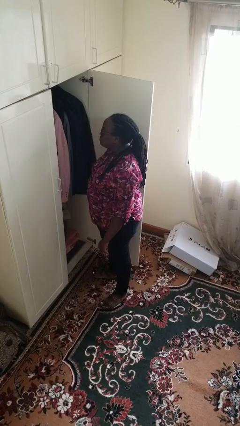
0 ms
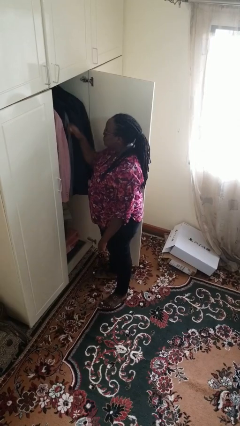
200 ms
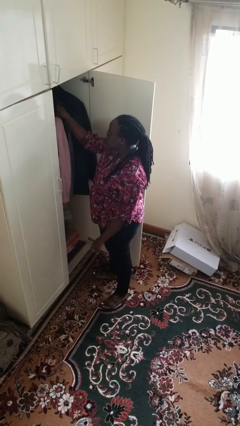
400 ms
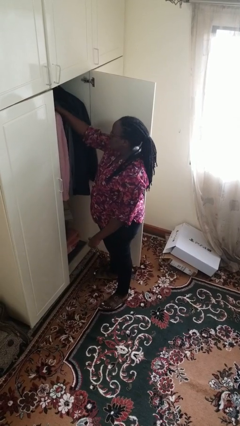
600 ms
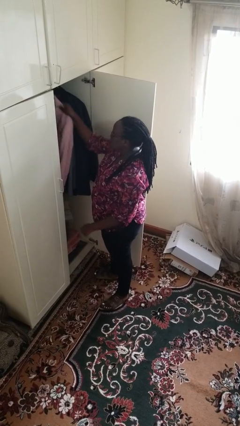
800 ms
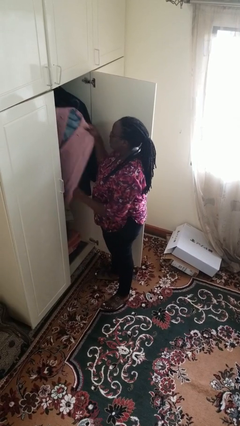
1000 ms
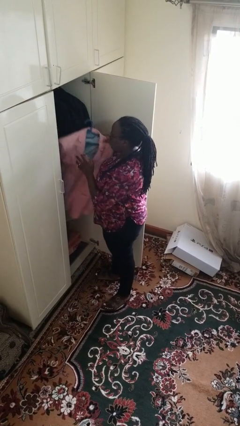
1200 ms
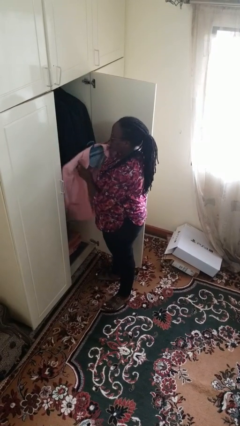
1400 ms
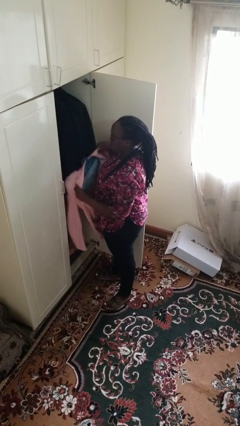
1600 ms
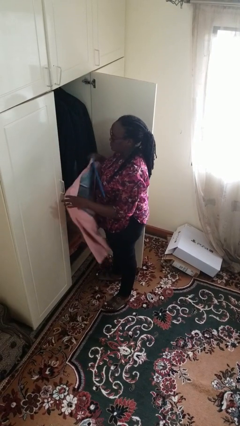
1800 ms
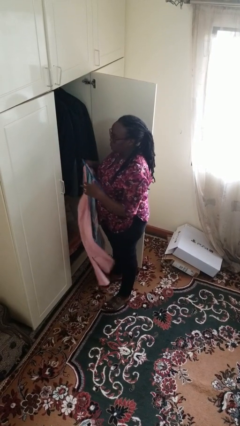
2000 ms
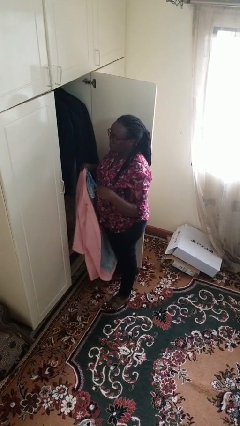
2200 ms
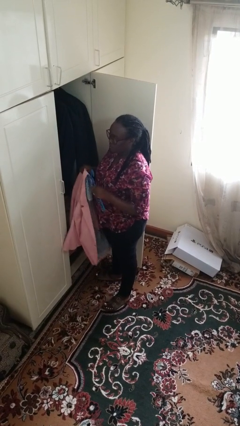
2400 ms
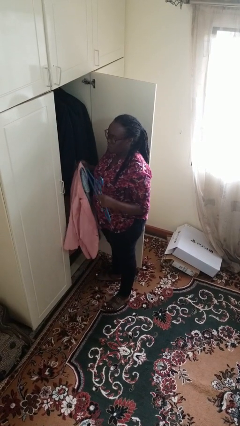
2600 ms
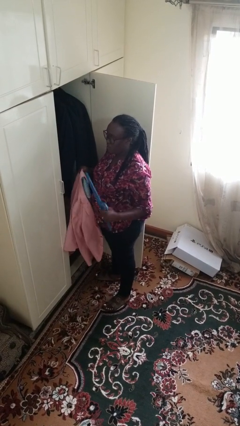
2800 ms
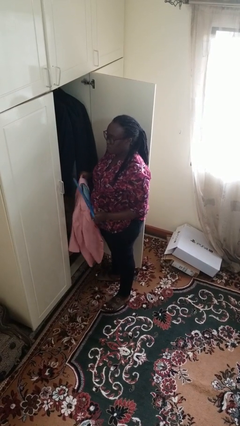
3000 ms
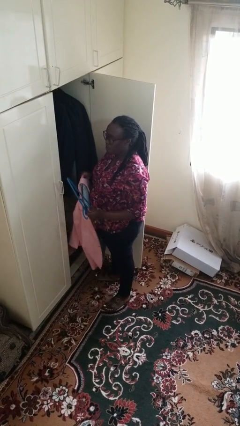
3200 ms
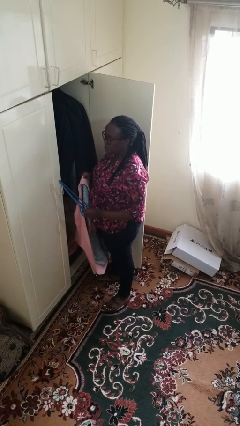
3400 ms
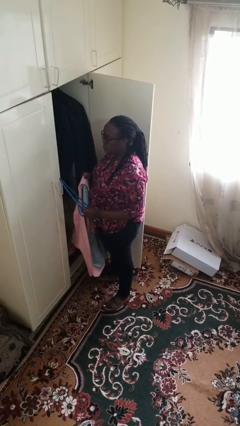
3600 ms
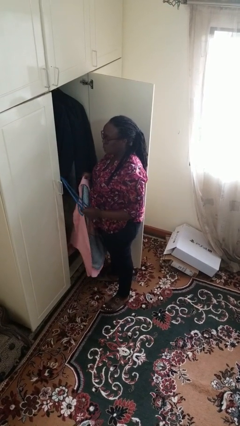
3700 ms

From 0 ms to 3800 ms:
person takes clothes from closet

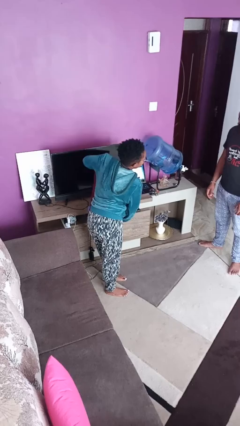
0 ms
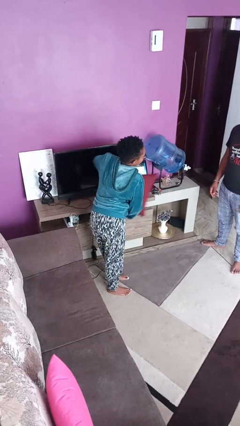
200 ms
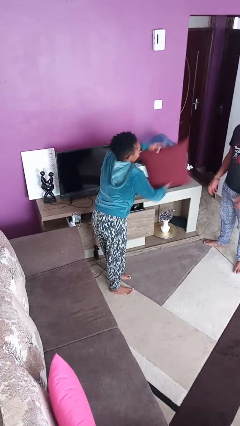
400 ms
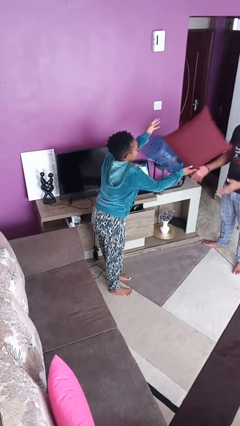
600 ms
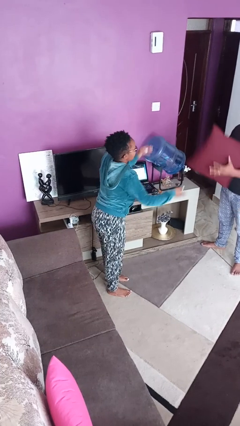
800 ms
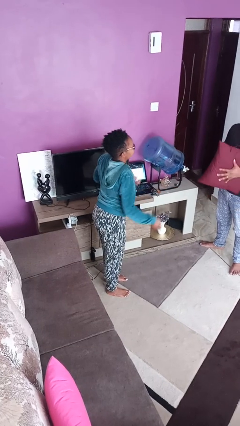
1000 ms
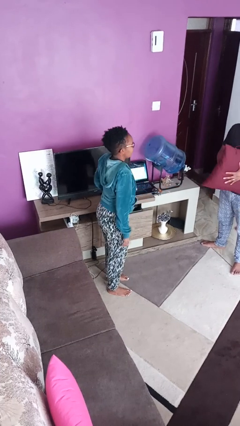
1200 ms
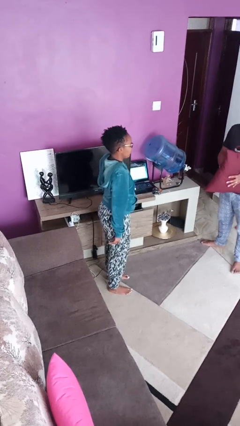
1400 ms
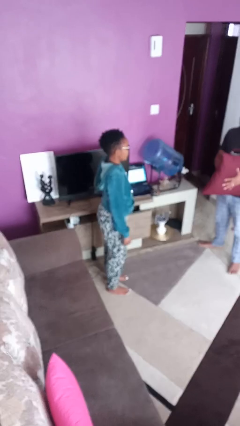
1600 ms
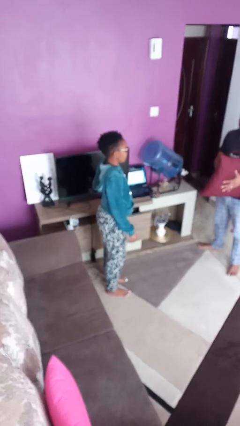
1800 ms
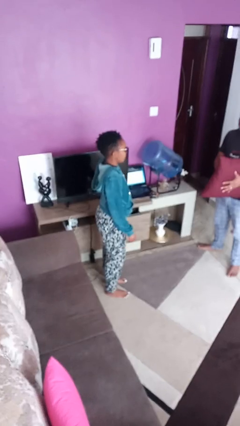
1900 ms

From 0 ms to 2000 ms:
person throws object to person

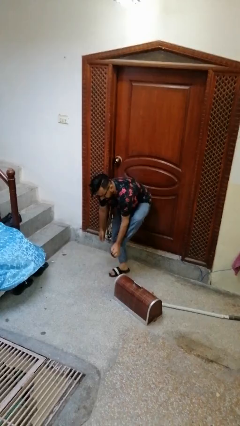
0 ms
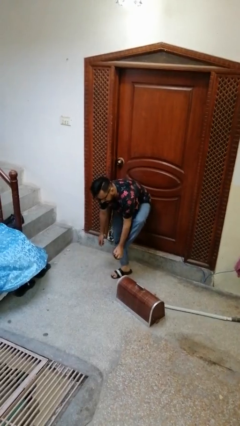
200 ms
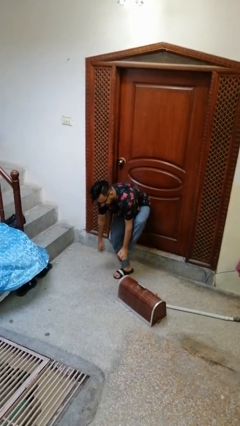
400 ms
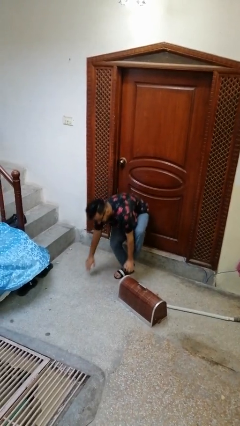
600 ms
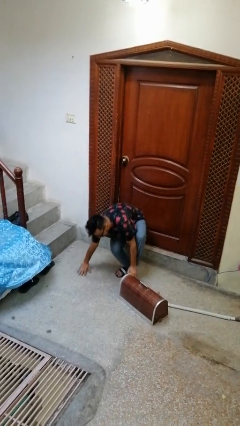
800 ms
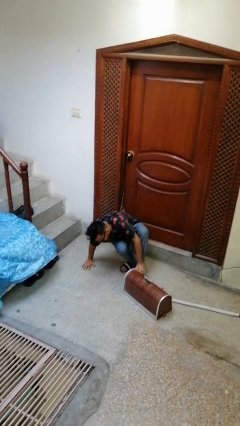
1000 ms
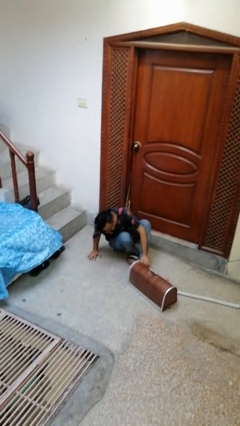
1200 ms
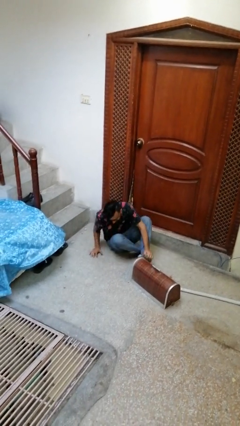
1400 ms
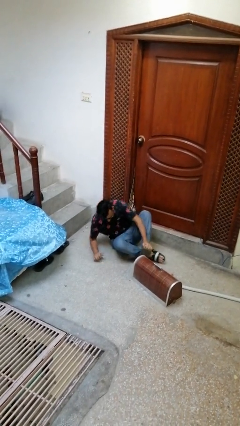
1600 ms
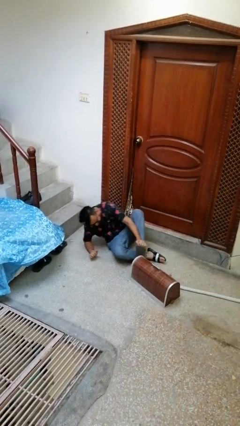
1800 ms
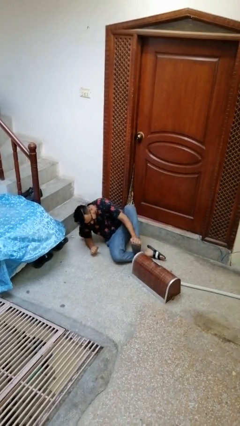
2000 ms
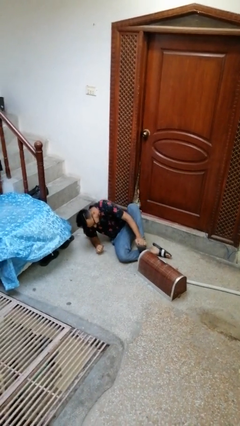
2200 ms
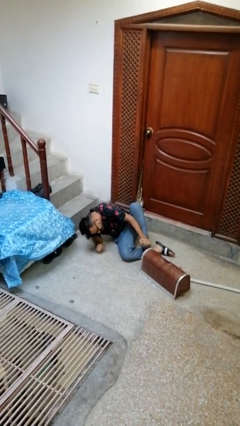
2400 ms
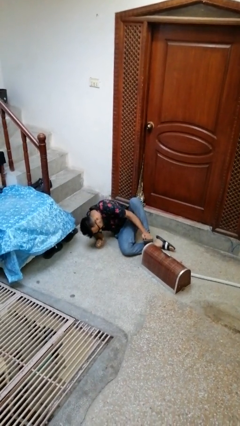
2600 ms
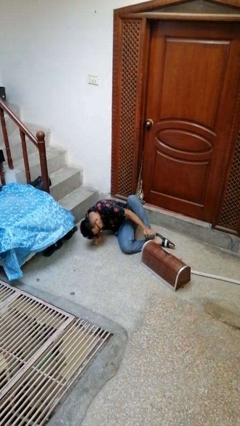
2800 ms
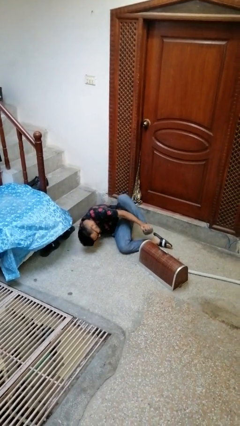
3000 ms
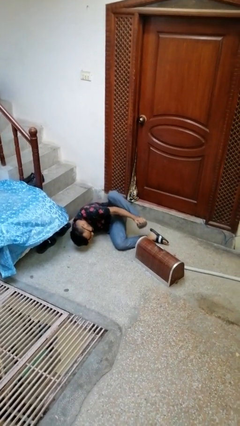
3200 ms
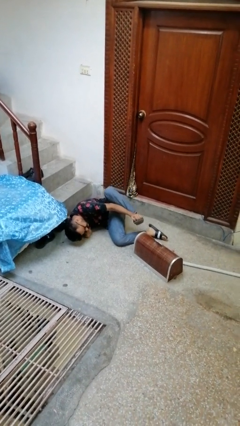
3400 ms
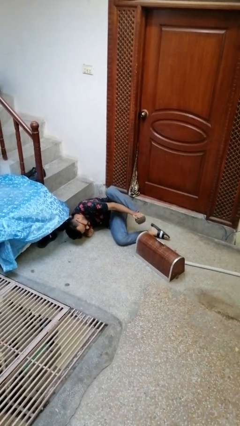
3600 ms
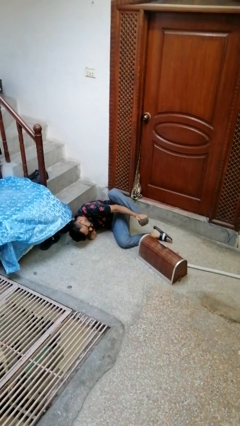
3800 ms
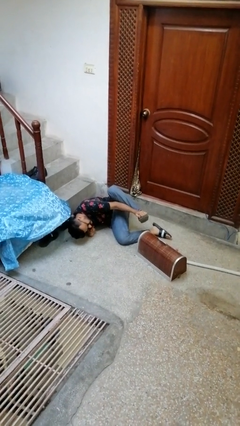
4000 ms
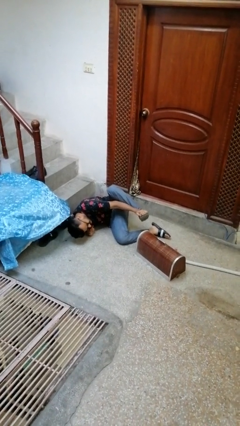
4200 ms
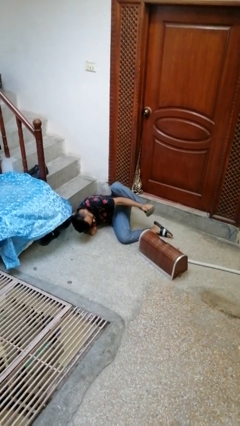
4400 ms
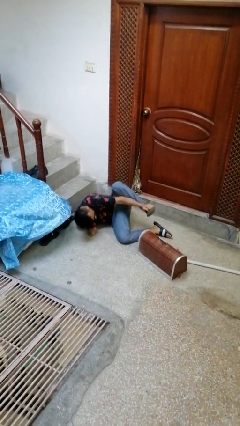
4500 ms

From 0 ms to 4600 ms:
person lies down on floor

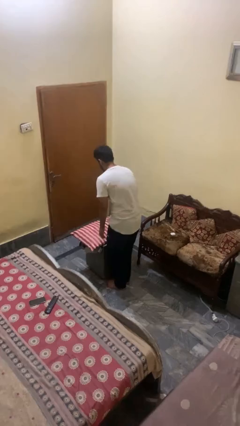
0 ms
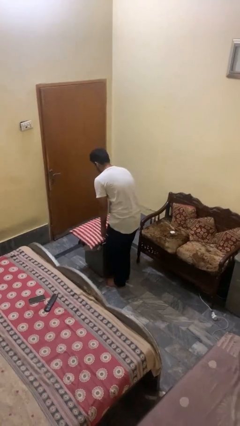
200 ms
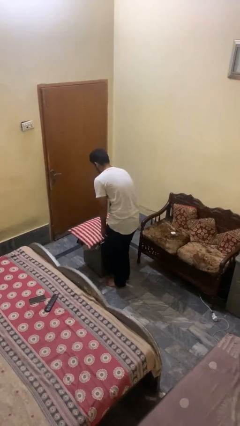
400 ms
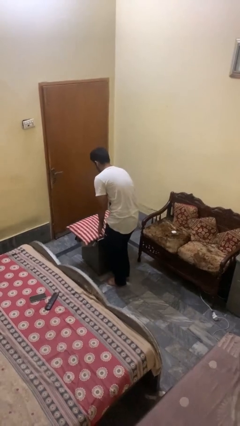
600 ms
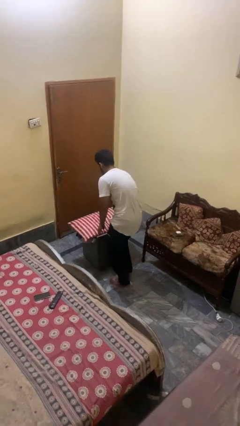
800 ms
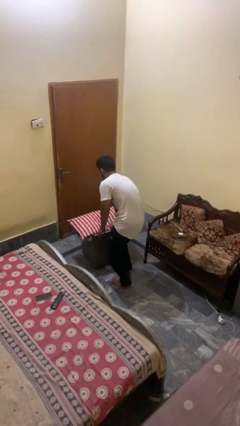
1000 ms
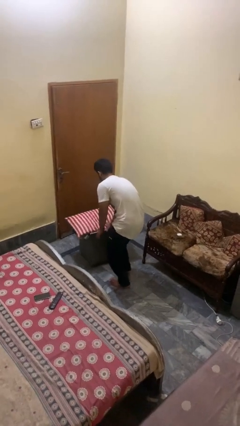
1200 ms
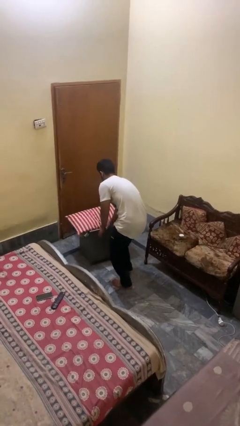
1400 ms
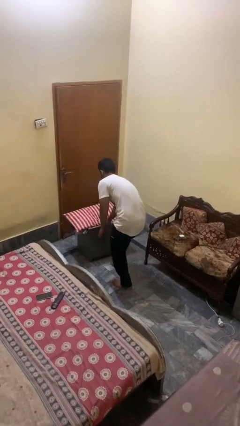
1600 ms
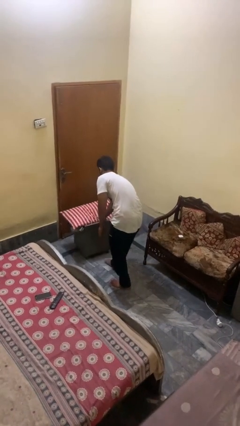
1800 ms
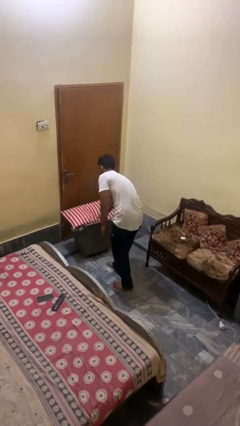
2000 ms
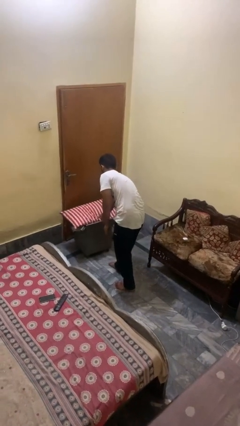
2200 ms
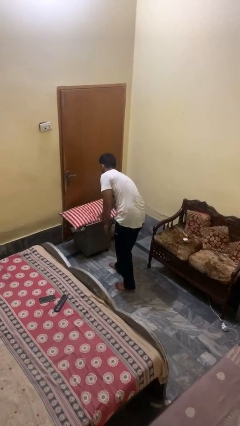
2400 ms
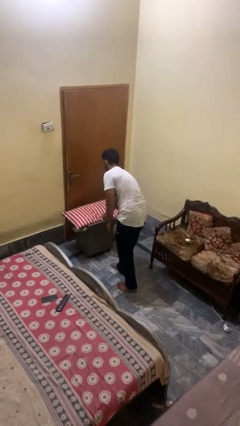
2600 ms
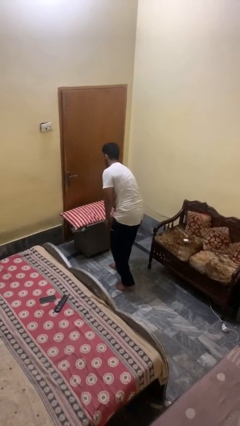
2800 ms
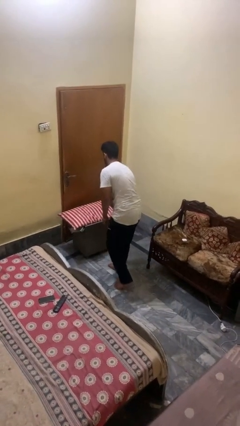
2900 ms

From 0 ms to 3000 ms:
person pushes wheeled cart

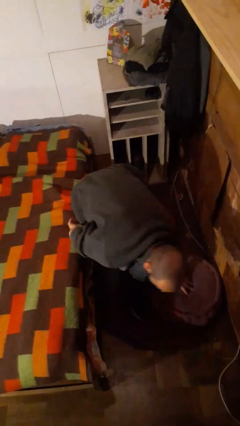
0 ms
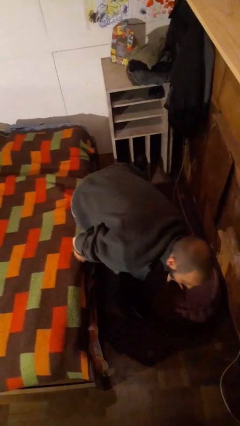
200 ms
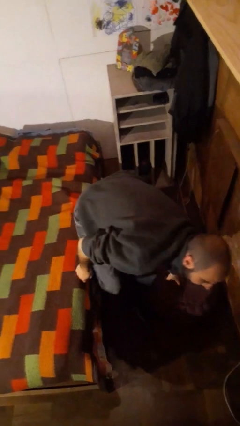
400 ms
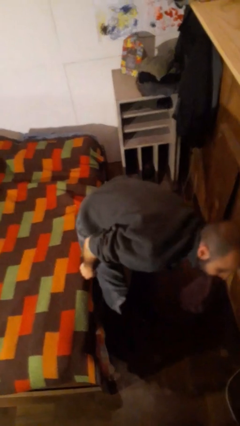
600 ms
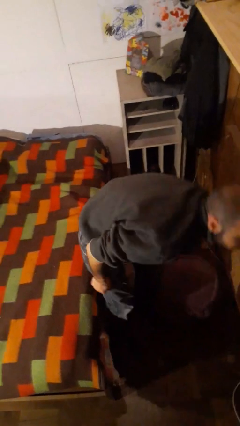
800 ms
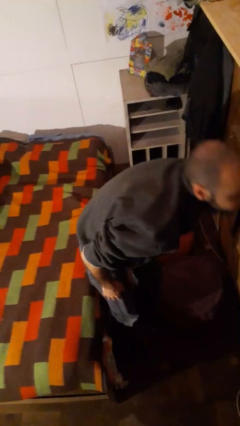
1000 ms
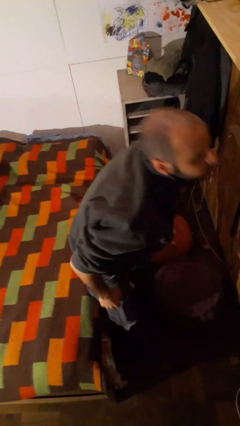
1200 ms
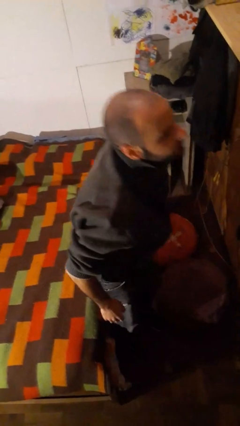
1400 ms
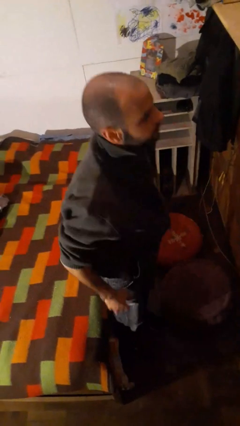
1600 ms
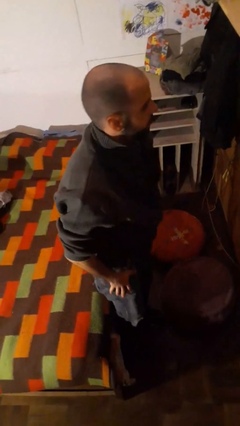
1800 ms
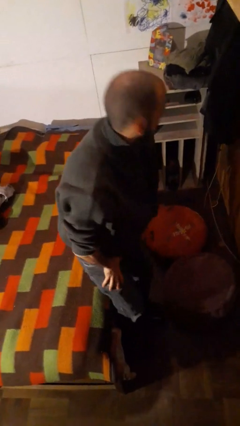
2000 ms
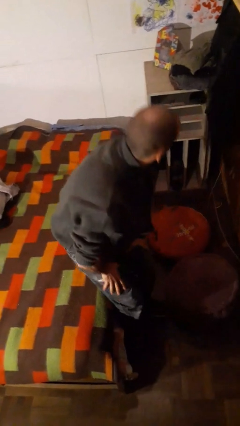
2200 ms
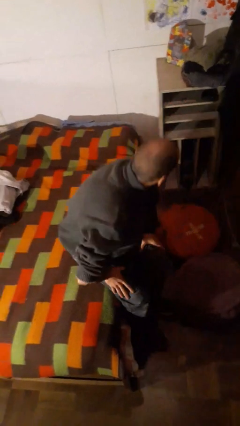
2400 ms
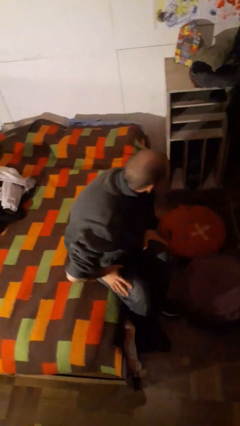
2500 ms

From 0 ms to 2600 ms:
person stands up from floor

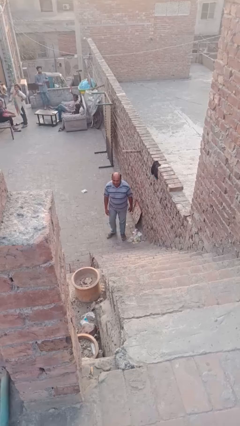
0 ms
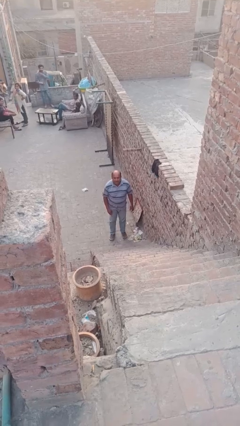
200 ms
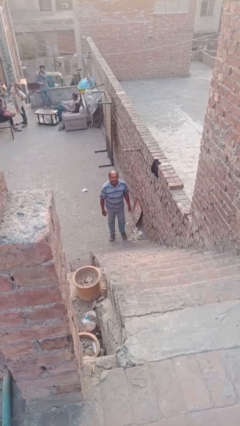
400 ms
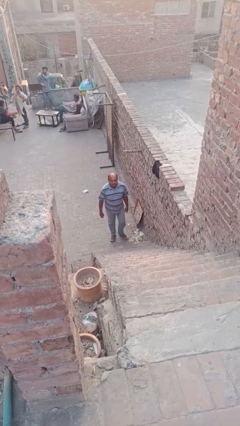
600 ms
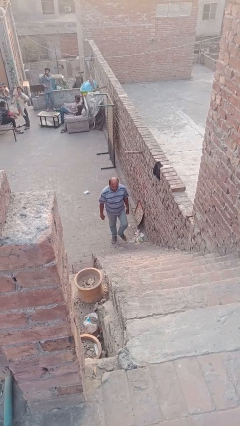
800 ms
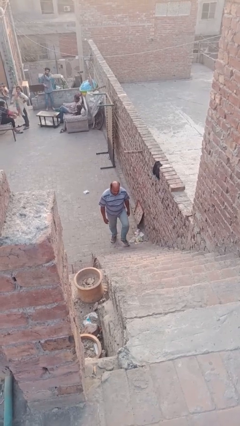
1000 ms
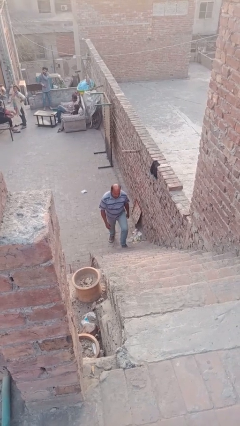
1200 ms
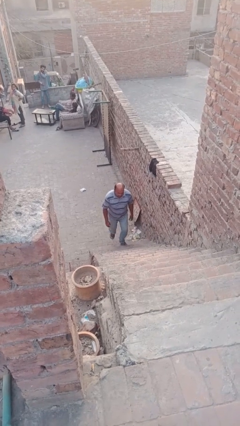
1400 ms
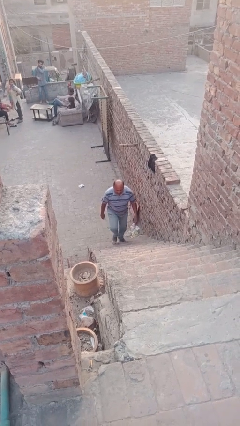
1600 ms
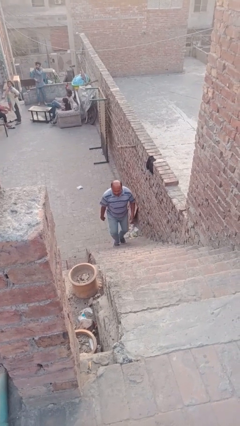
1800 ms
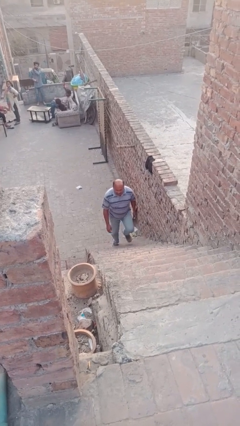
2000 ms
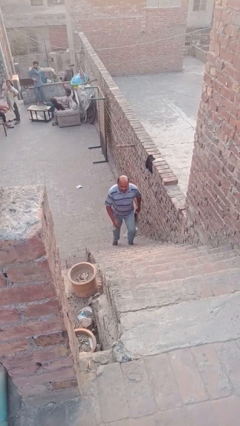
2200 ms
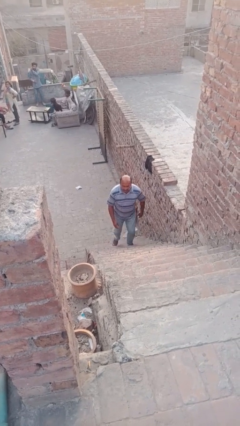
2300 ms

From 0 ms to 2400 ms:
person climbs up stairs
